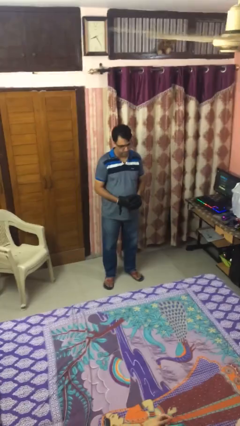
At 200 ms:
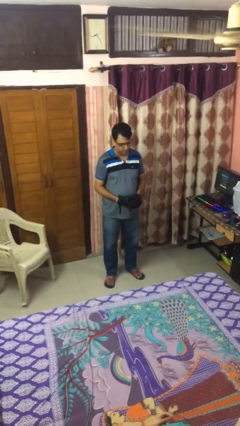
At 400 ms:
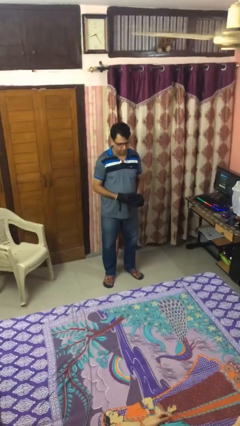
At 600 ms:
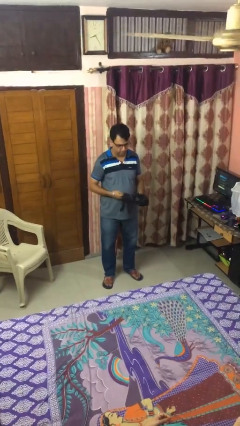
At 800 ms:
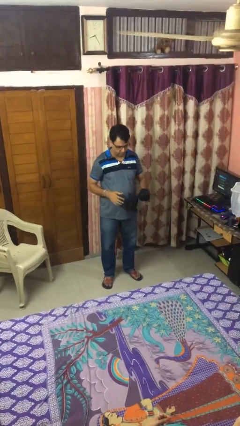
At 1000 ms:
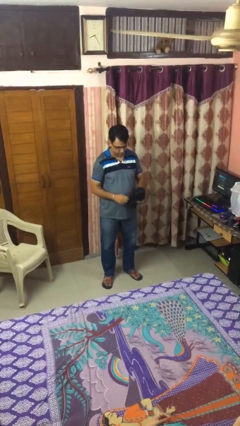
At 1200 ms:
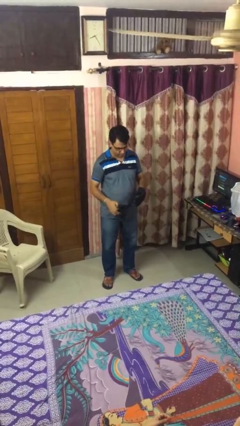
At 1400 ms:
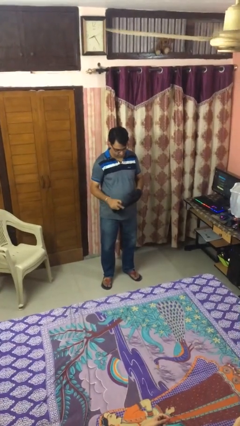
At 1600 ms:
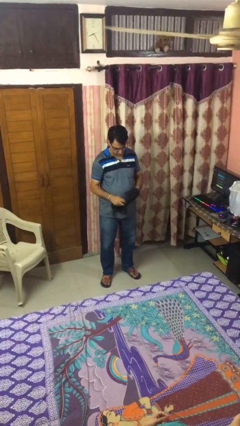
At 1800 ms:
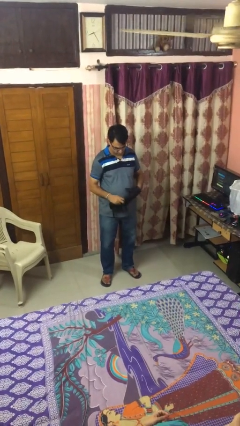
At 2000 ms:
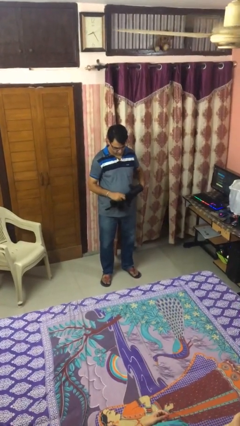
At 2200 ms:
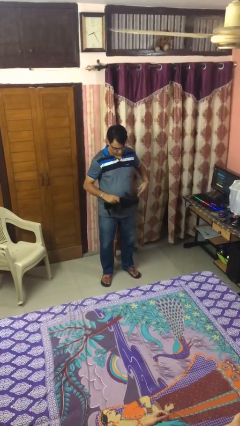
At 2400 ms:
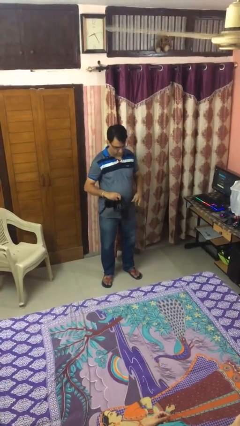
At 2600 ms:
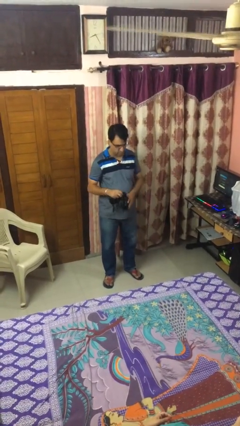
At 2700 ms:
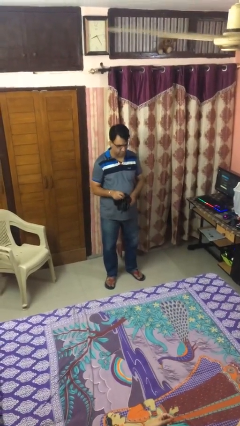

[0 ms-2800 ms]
person takes off gloves

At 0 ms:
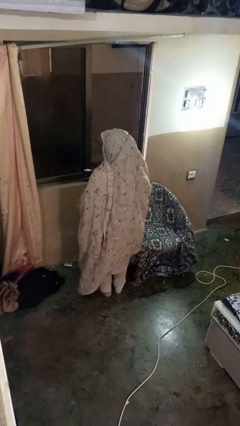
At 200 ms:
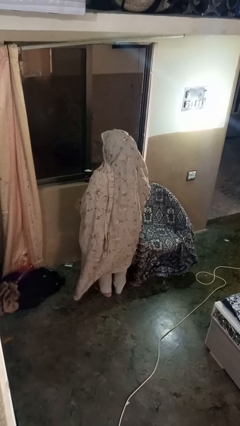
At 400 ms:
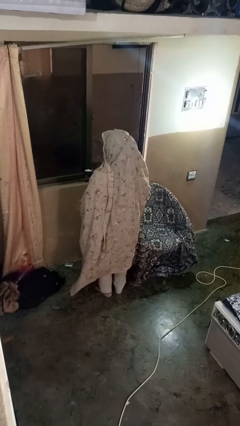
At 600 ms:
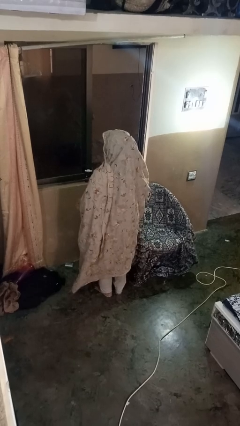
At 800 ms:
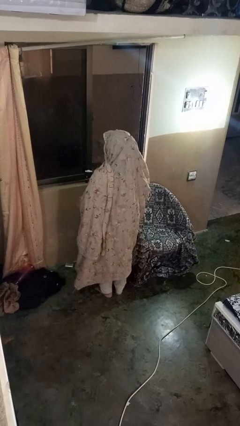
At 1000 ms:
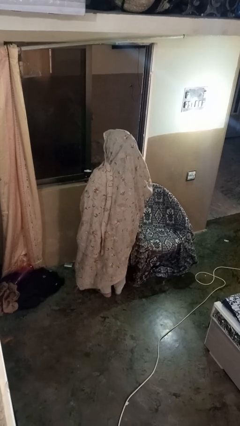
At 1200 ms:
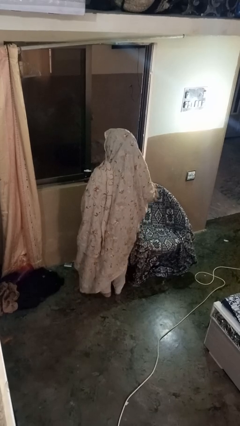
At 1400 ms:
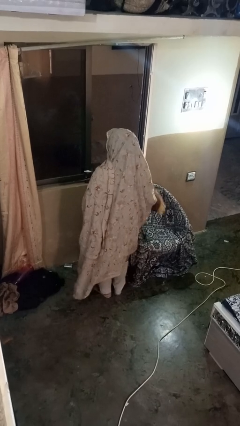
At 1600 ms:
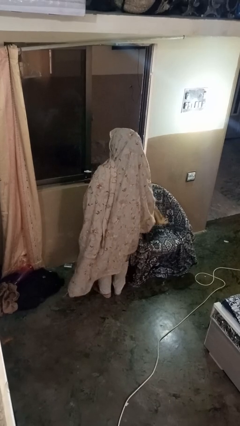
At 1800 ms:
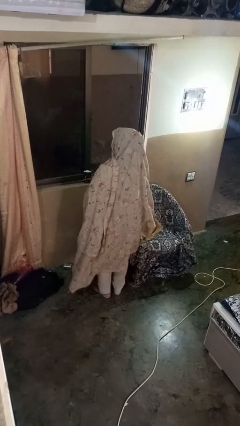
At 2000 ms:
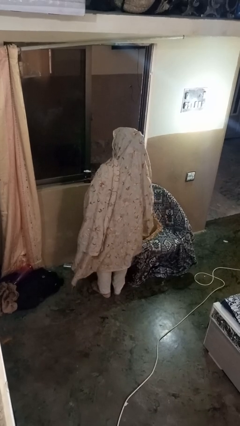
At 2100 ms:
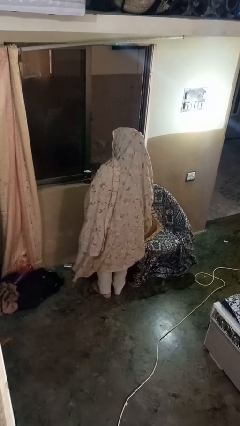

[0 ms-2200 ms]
person puts down object on couch

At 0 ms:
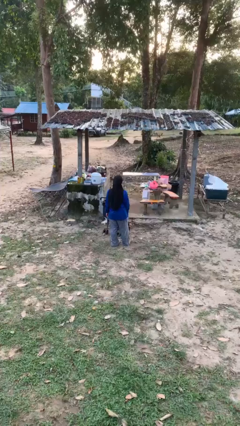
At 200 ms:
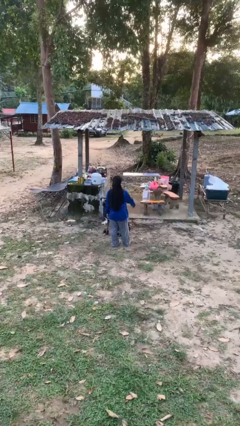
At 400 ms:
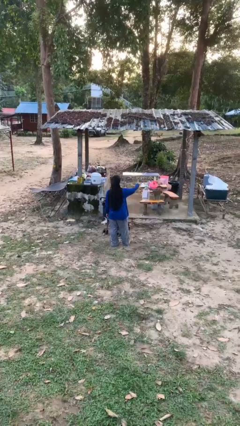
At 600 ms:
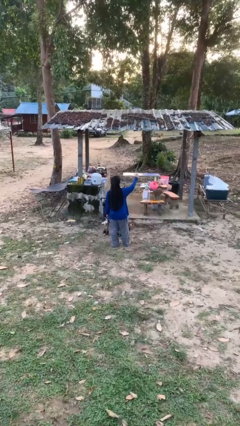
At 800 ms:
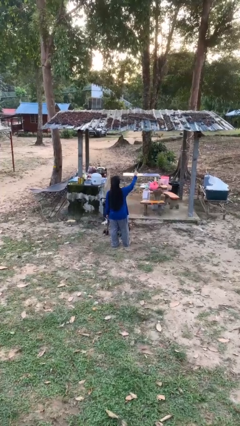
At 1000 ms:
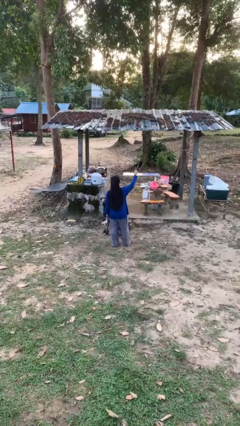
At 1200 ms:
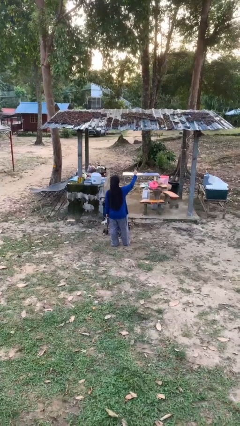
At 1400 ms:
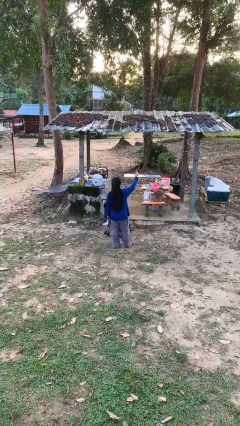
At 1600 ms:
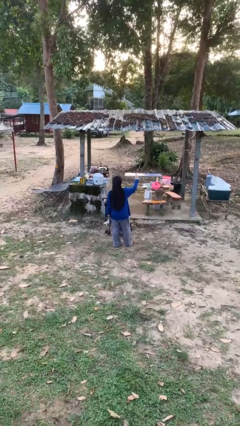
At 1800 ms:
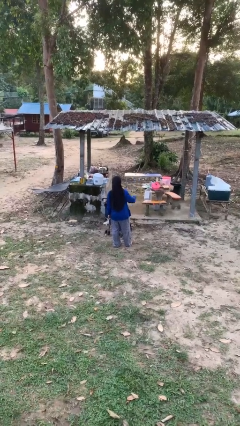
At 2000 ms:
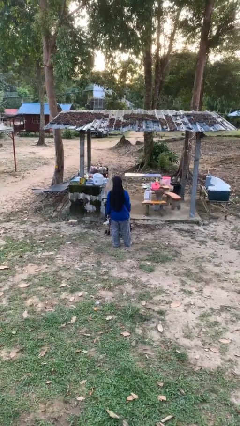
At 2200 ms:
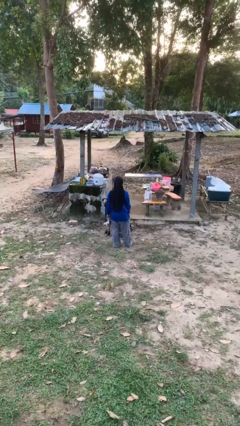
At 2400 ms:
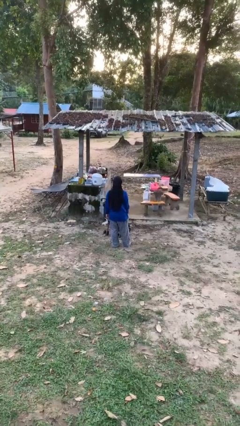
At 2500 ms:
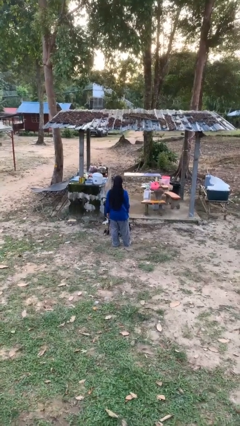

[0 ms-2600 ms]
person gestures number one

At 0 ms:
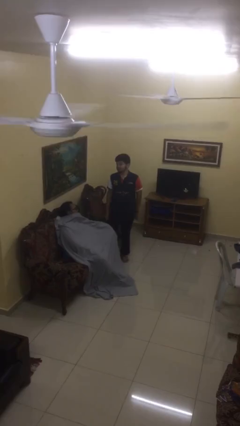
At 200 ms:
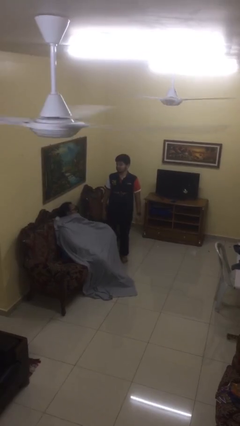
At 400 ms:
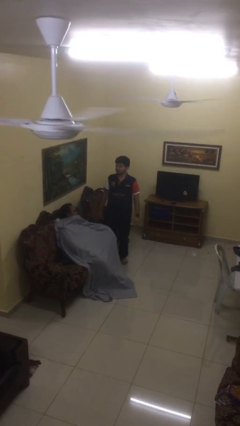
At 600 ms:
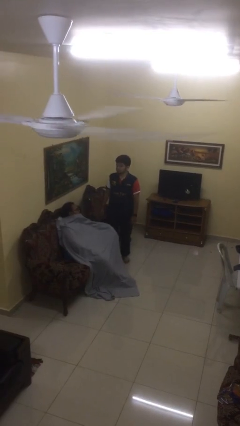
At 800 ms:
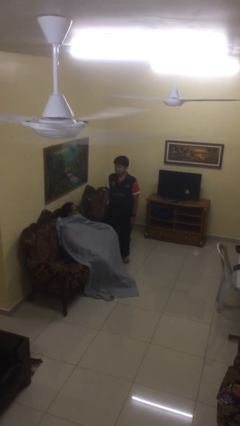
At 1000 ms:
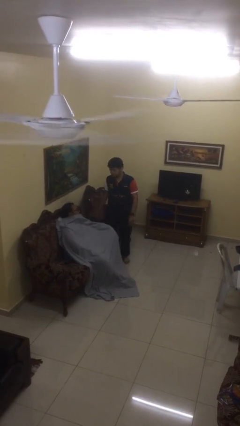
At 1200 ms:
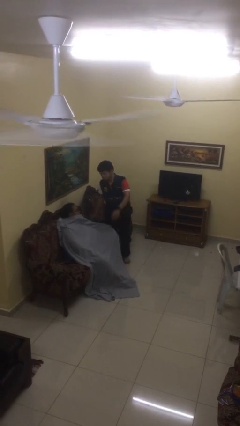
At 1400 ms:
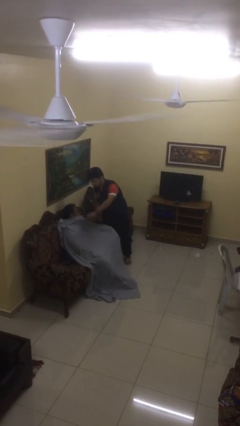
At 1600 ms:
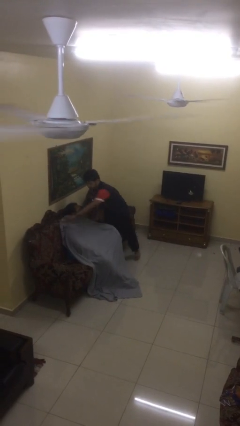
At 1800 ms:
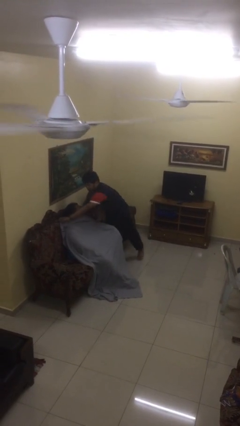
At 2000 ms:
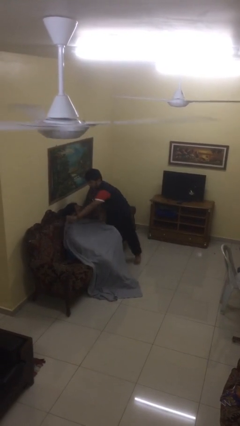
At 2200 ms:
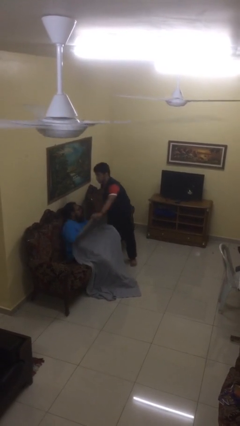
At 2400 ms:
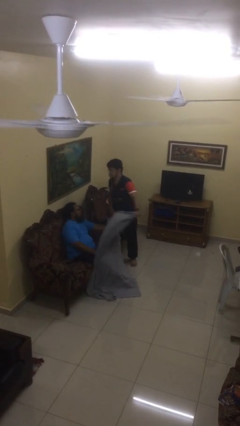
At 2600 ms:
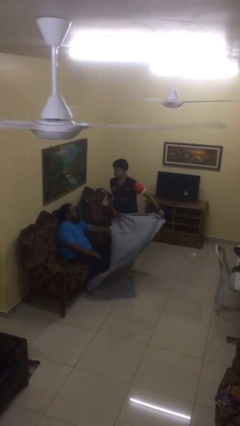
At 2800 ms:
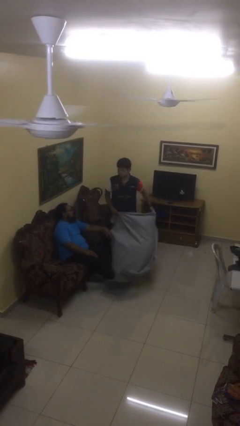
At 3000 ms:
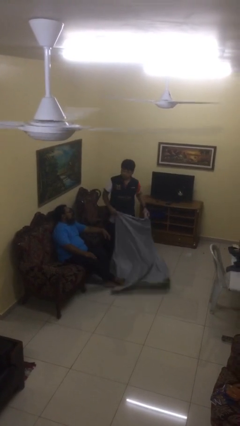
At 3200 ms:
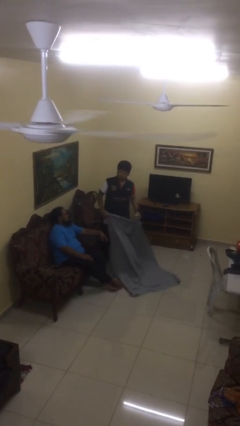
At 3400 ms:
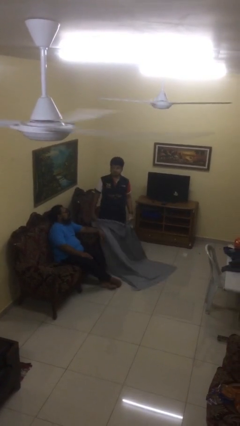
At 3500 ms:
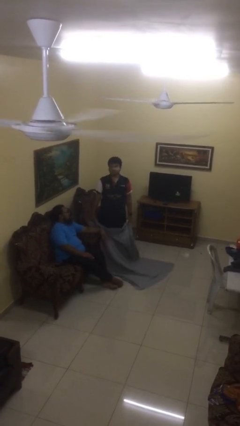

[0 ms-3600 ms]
person uncovers friend with blanket

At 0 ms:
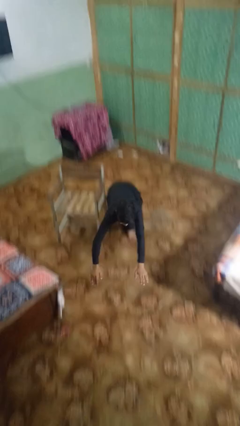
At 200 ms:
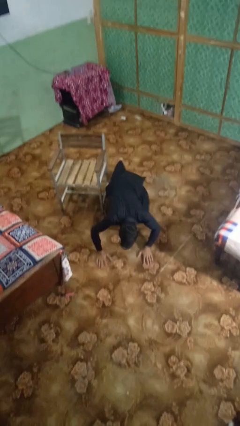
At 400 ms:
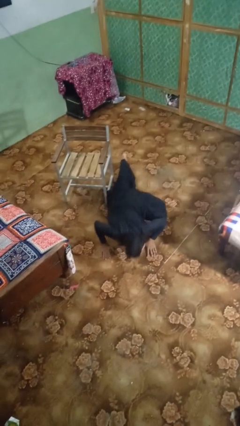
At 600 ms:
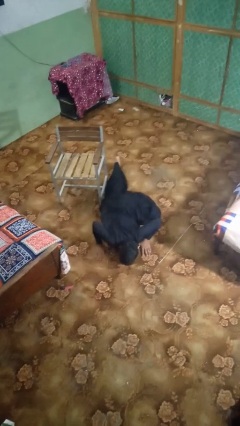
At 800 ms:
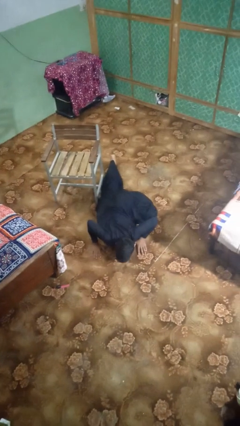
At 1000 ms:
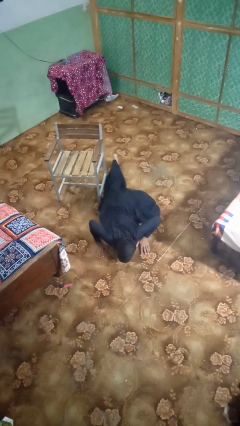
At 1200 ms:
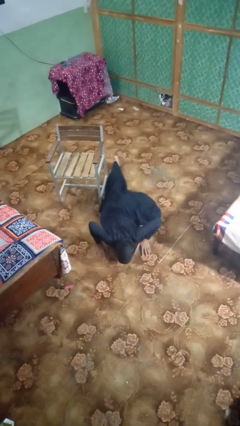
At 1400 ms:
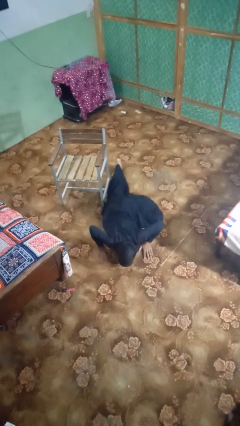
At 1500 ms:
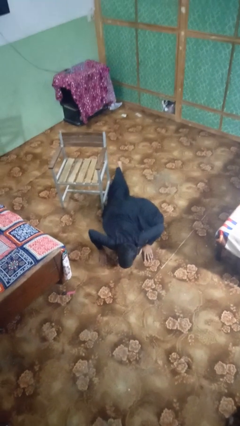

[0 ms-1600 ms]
person lies down on floor

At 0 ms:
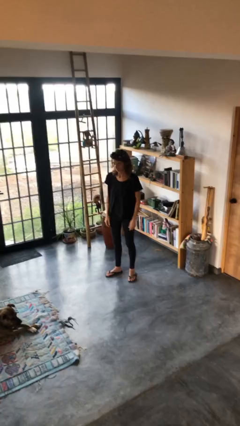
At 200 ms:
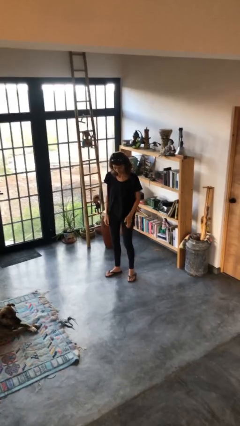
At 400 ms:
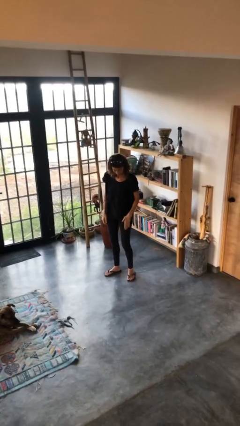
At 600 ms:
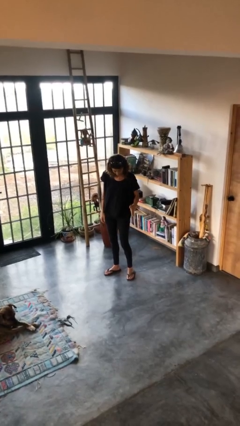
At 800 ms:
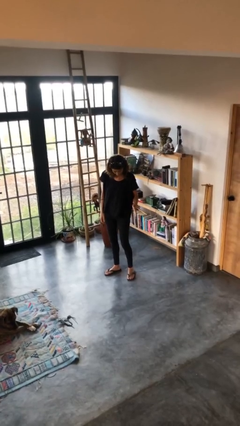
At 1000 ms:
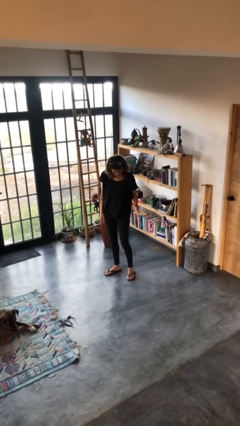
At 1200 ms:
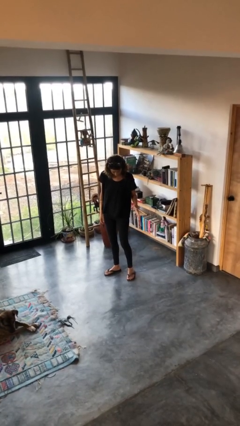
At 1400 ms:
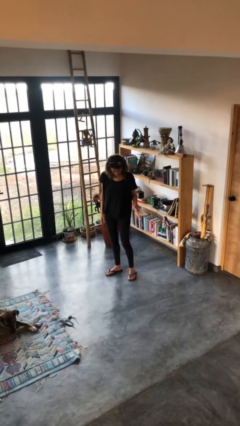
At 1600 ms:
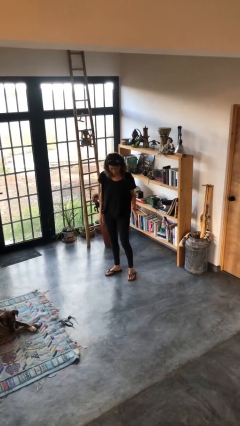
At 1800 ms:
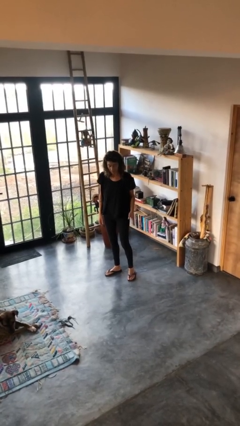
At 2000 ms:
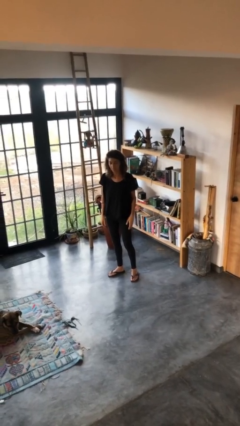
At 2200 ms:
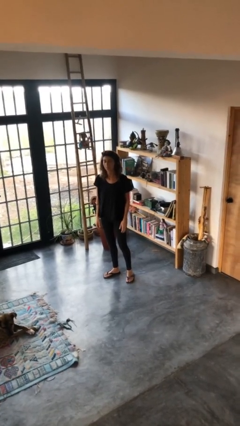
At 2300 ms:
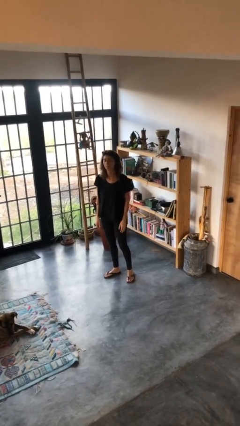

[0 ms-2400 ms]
person swats bug

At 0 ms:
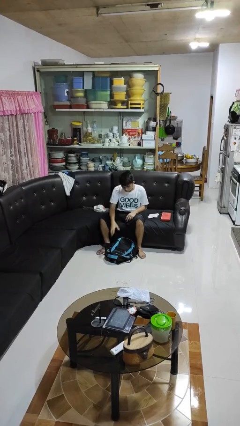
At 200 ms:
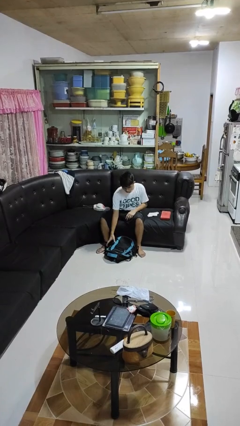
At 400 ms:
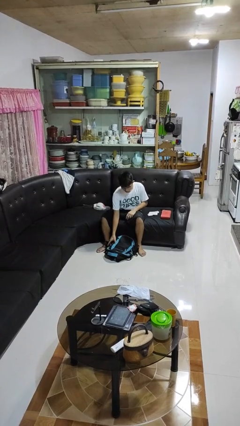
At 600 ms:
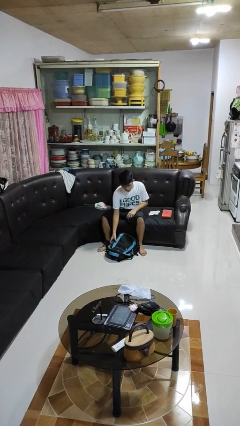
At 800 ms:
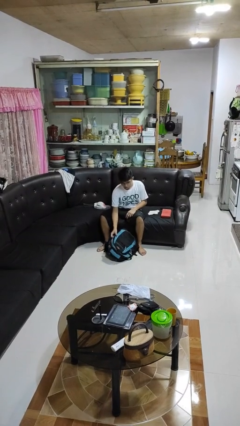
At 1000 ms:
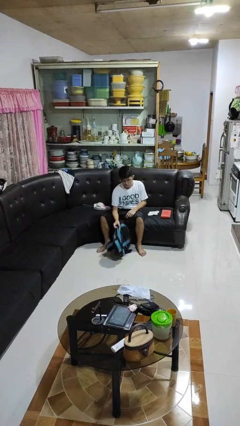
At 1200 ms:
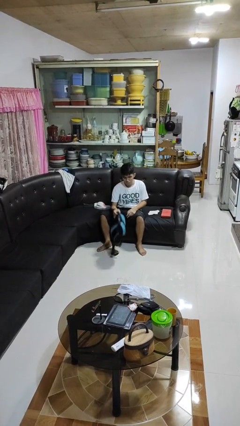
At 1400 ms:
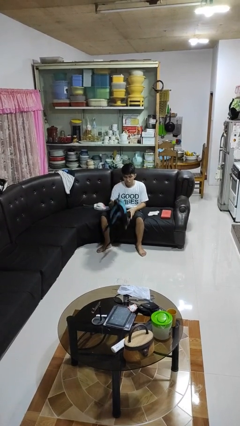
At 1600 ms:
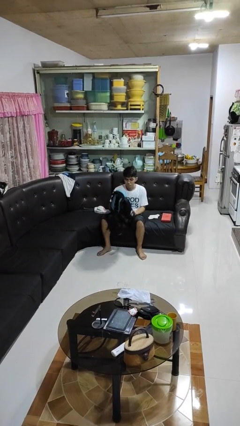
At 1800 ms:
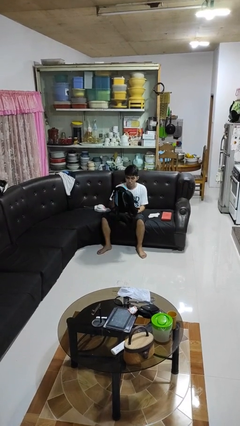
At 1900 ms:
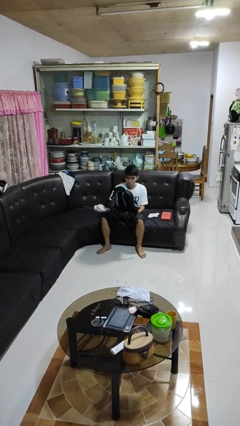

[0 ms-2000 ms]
person picks up object from floor
